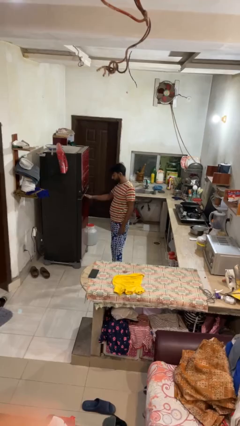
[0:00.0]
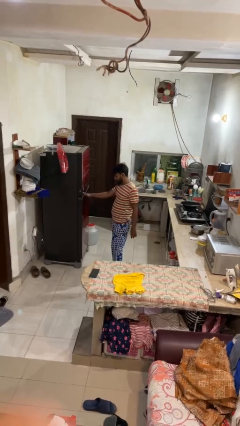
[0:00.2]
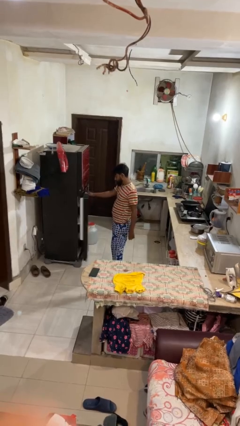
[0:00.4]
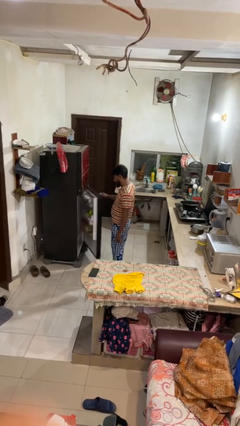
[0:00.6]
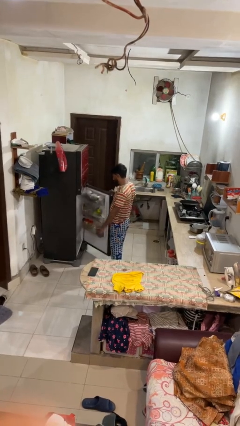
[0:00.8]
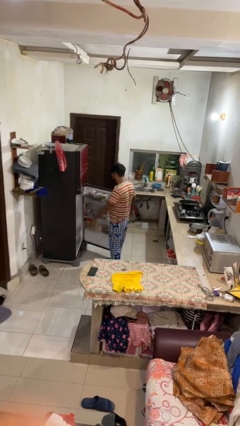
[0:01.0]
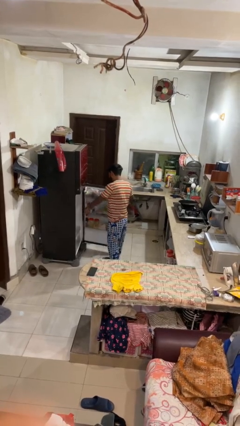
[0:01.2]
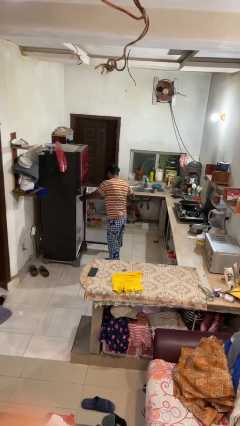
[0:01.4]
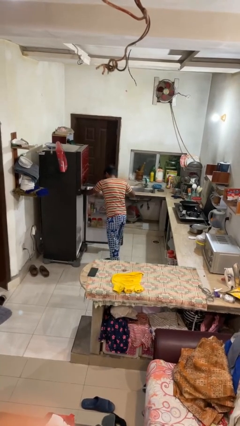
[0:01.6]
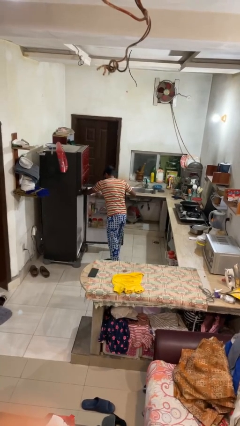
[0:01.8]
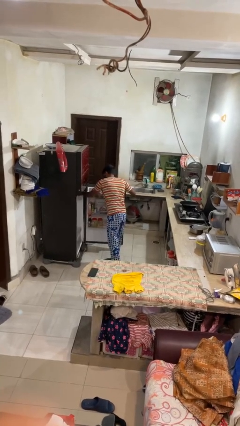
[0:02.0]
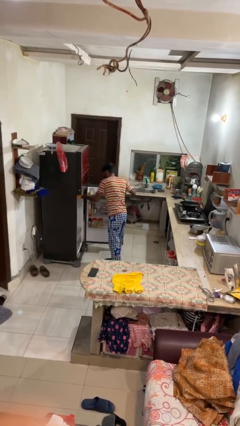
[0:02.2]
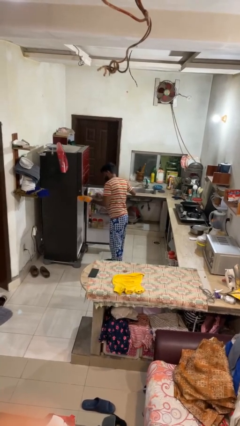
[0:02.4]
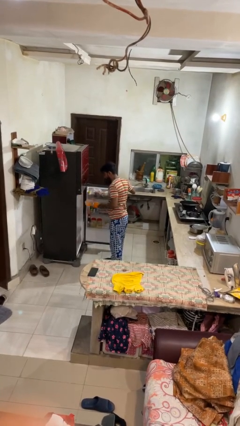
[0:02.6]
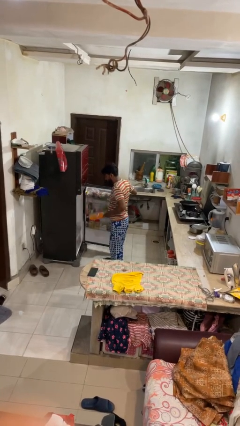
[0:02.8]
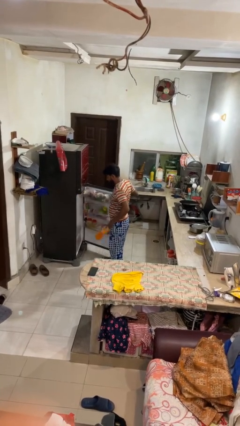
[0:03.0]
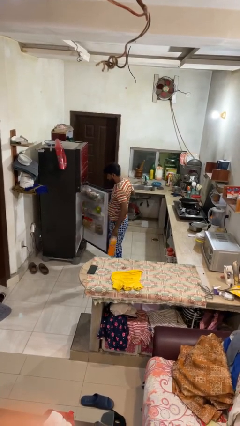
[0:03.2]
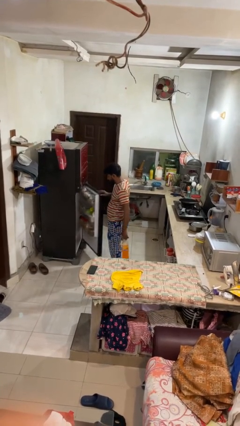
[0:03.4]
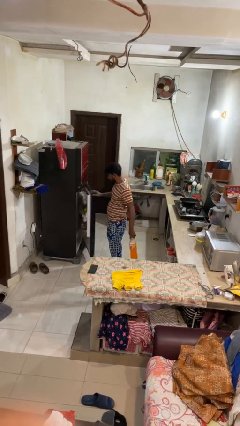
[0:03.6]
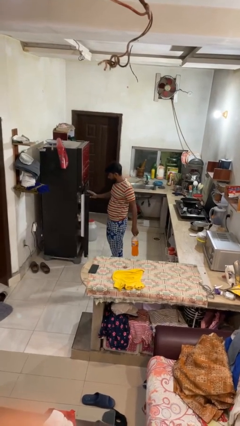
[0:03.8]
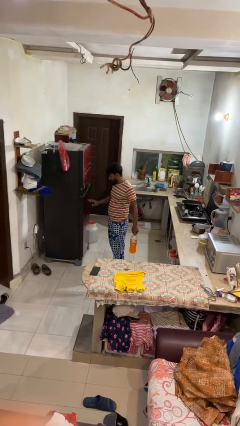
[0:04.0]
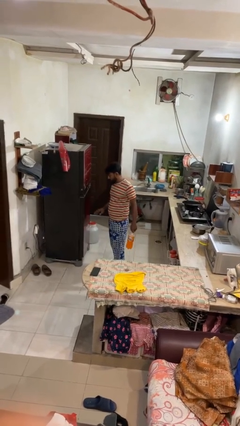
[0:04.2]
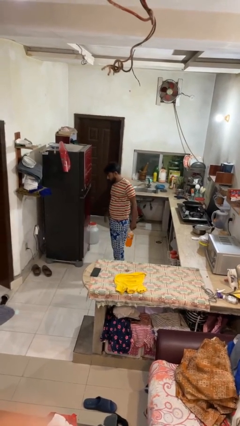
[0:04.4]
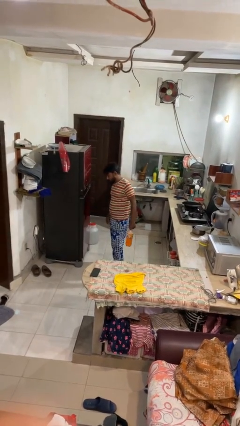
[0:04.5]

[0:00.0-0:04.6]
person takes object from refrigerator

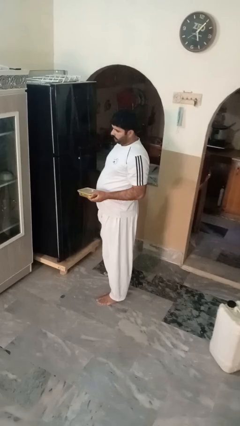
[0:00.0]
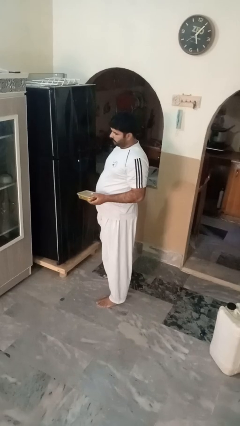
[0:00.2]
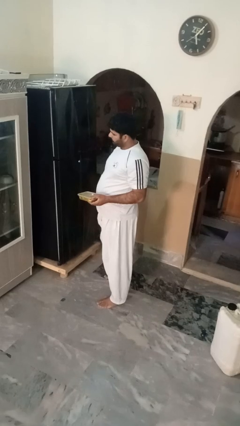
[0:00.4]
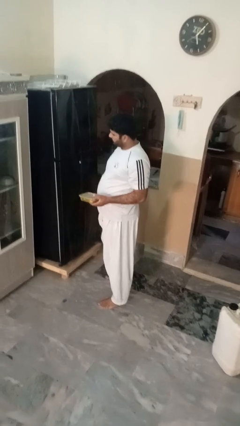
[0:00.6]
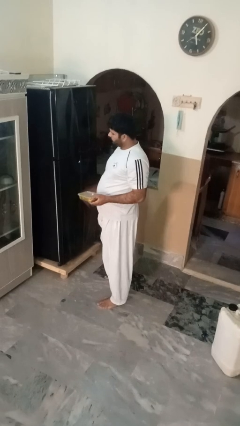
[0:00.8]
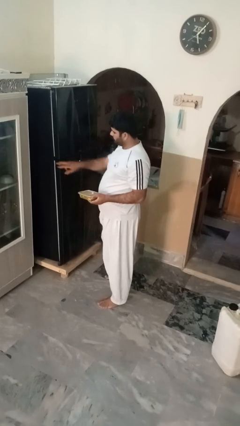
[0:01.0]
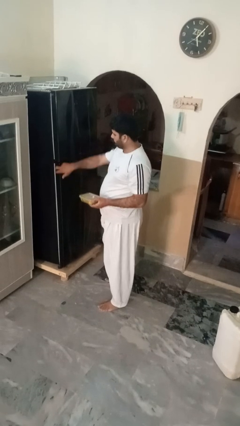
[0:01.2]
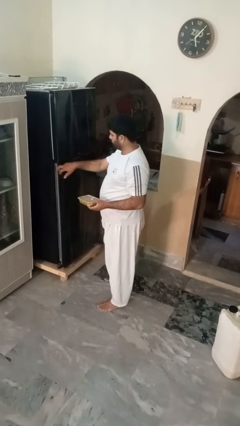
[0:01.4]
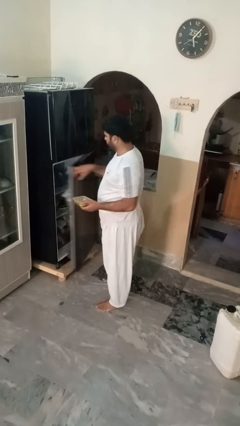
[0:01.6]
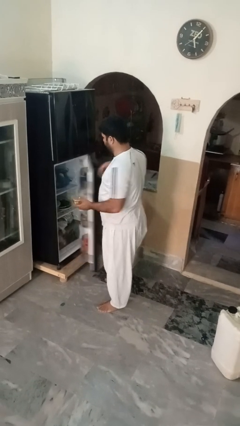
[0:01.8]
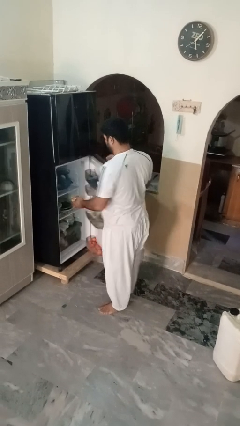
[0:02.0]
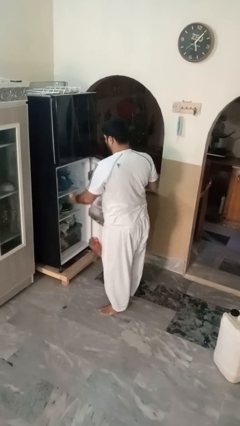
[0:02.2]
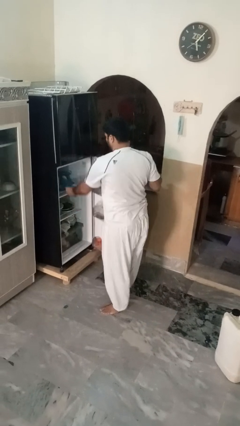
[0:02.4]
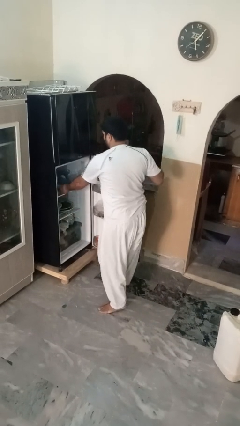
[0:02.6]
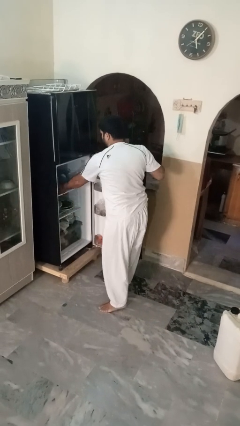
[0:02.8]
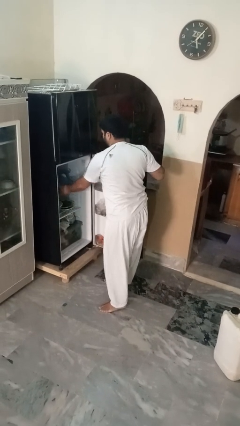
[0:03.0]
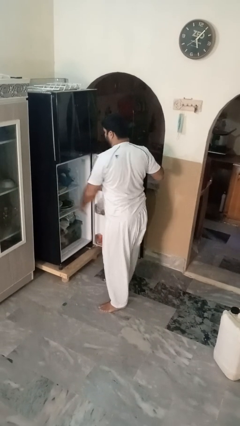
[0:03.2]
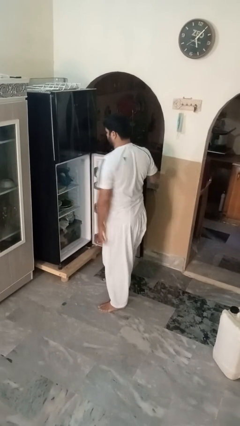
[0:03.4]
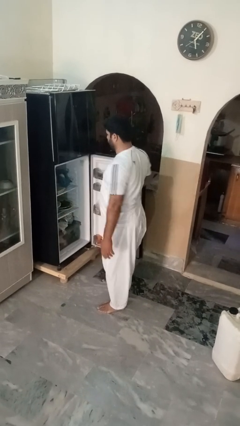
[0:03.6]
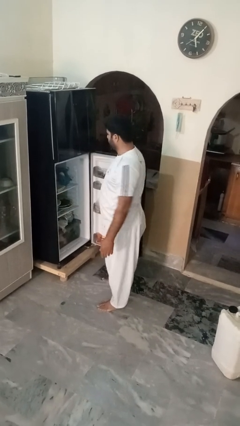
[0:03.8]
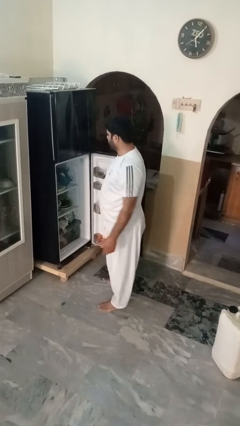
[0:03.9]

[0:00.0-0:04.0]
person puts object into refrigerator

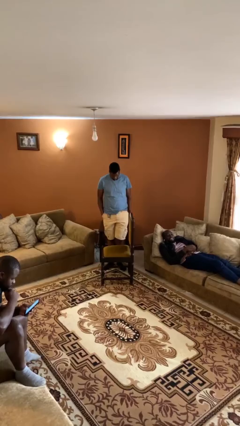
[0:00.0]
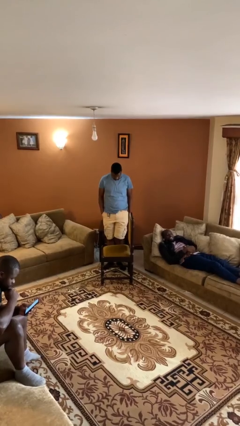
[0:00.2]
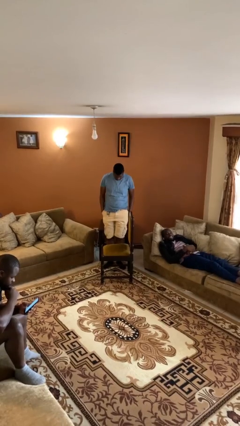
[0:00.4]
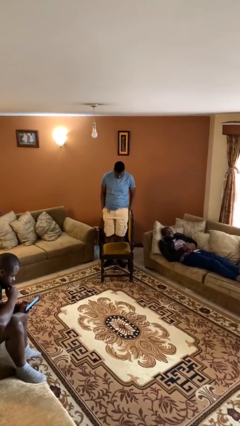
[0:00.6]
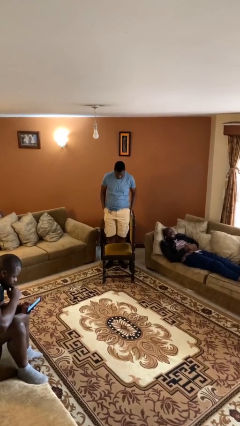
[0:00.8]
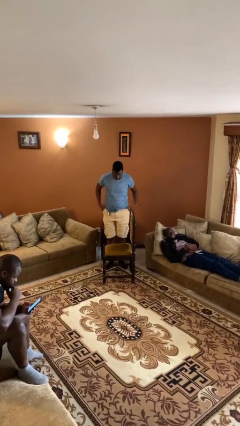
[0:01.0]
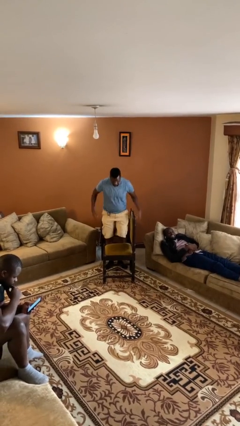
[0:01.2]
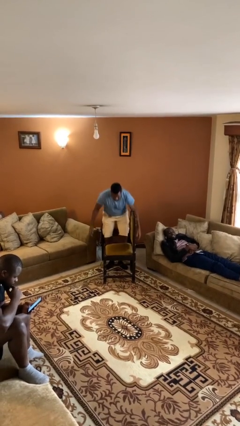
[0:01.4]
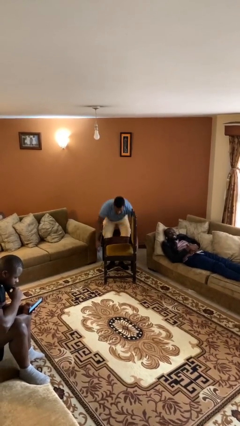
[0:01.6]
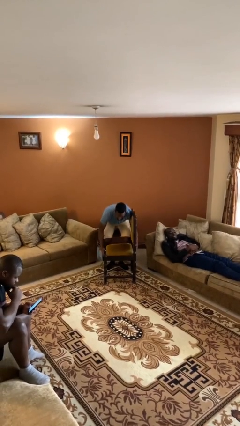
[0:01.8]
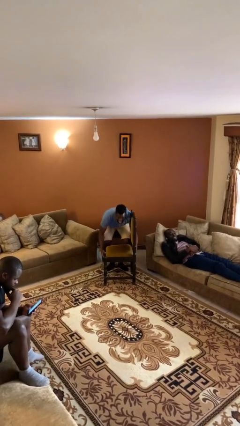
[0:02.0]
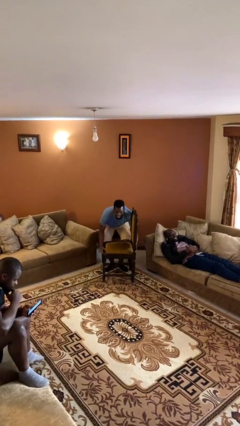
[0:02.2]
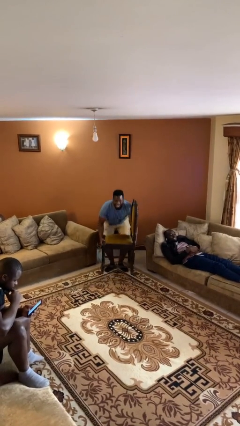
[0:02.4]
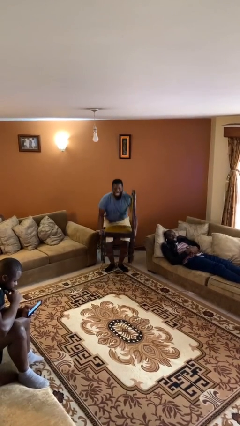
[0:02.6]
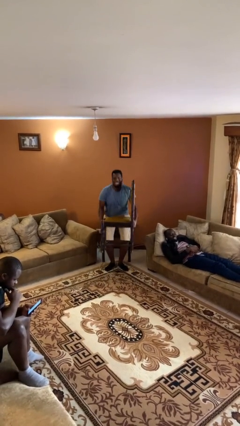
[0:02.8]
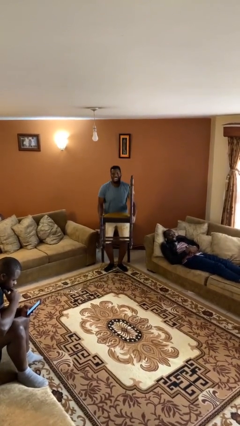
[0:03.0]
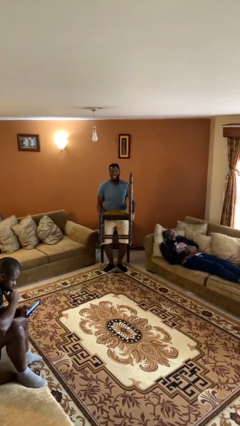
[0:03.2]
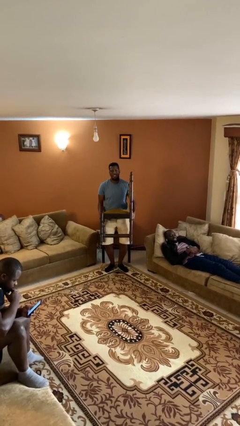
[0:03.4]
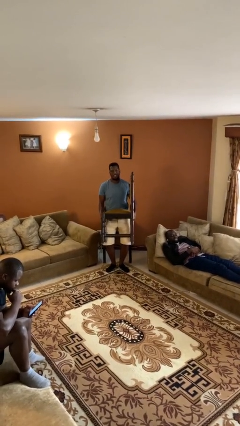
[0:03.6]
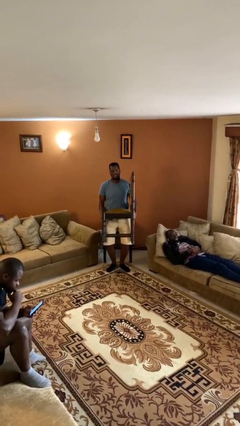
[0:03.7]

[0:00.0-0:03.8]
person picks up object from floor

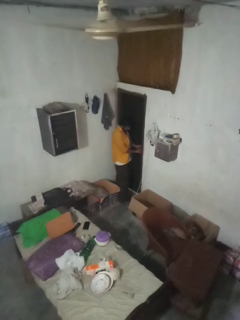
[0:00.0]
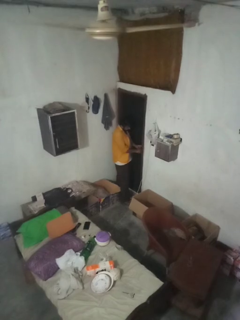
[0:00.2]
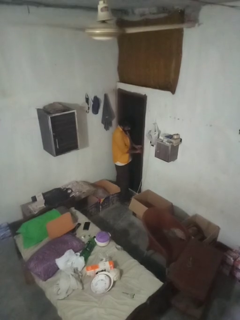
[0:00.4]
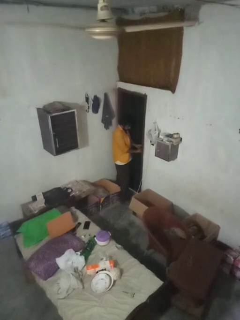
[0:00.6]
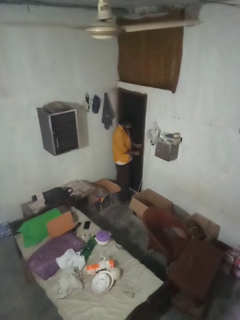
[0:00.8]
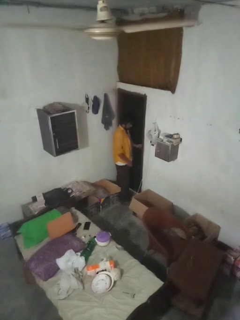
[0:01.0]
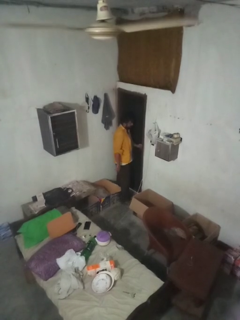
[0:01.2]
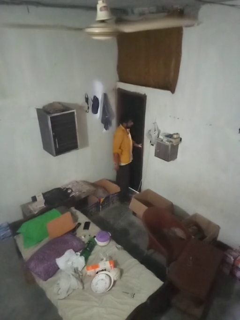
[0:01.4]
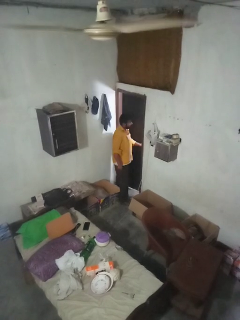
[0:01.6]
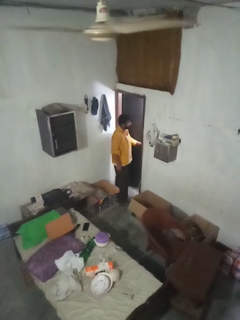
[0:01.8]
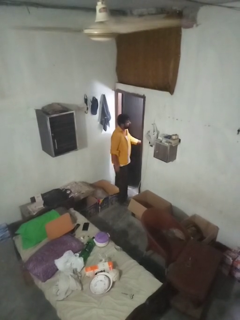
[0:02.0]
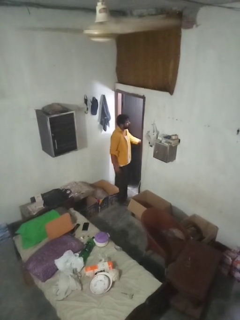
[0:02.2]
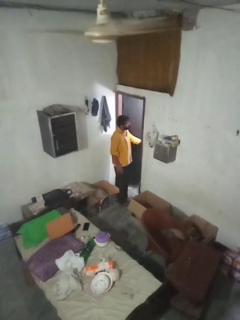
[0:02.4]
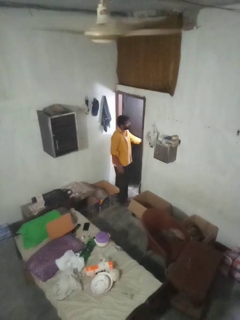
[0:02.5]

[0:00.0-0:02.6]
person opens facility door

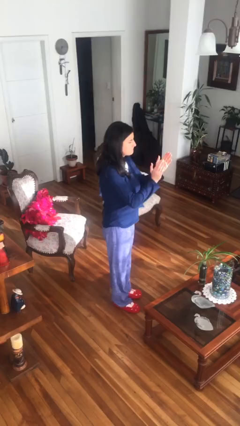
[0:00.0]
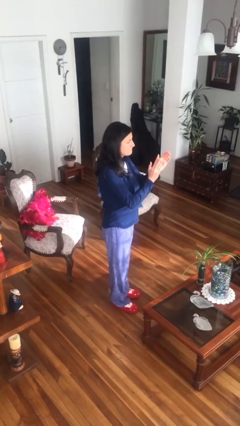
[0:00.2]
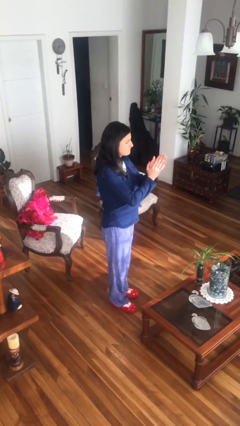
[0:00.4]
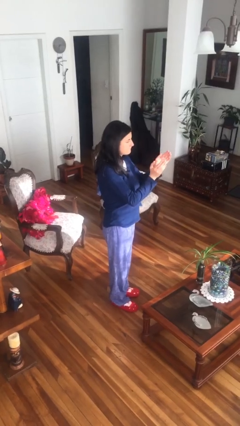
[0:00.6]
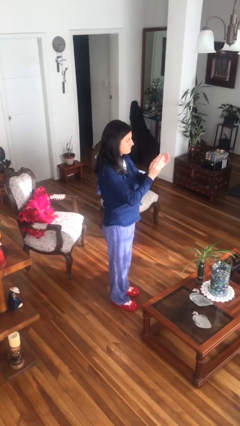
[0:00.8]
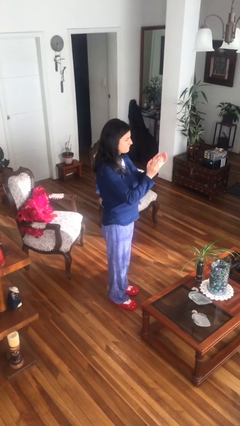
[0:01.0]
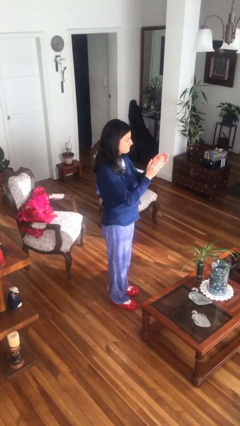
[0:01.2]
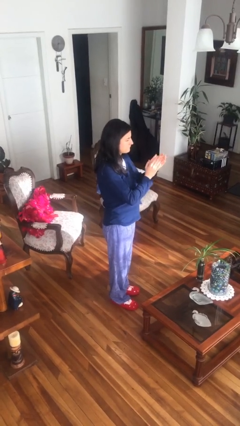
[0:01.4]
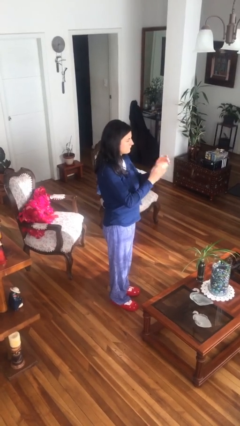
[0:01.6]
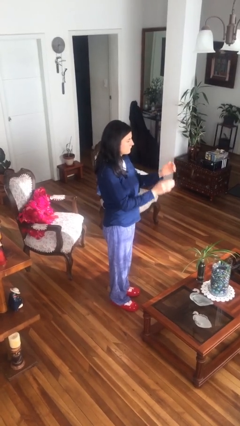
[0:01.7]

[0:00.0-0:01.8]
person claps hands

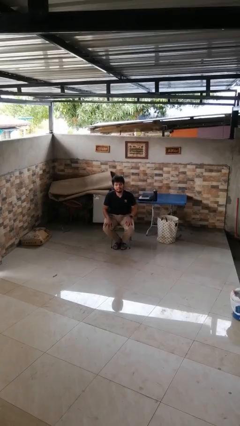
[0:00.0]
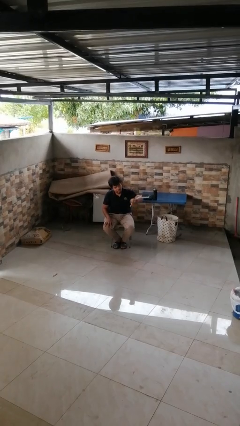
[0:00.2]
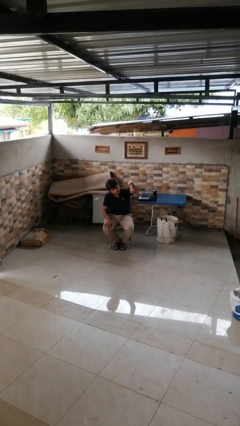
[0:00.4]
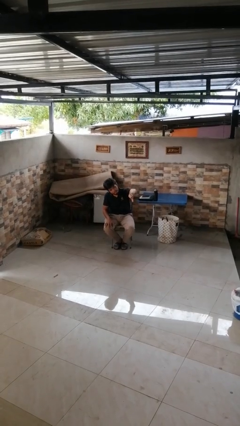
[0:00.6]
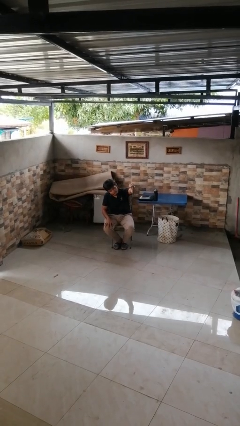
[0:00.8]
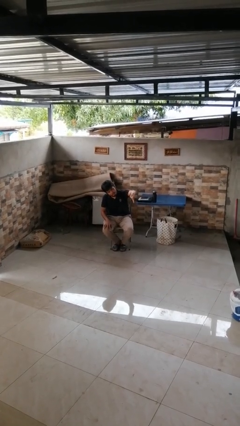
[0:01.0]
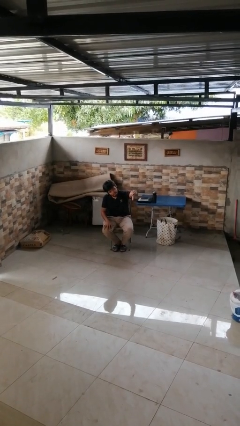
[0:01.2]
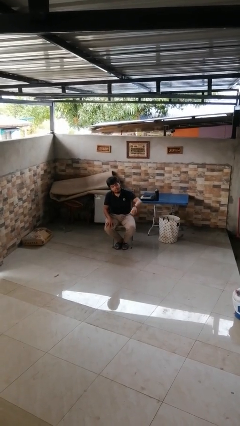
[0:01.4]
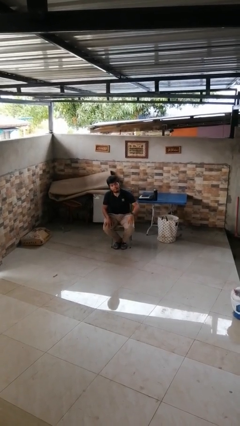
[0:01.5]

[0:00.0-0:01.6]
person gestures thumbs down
